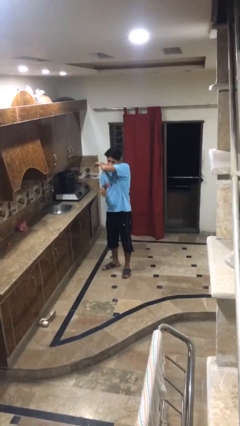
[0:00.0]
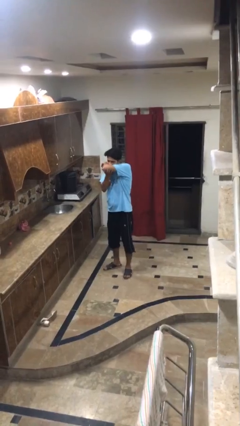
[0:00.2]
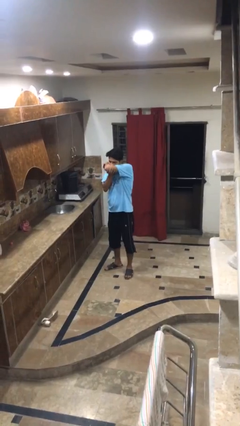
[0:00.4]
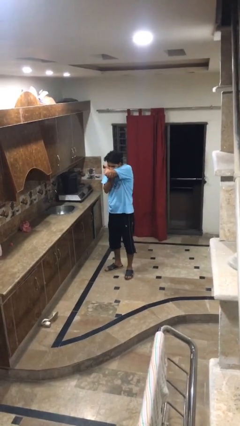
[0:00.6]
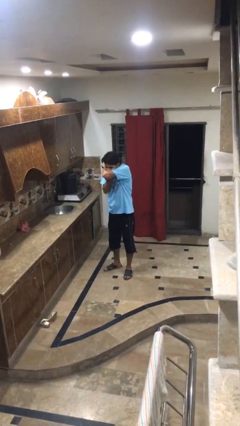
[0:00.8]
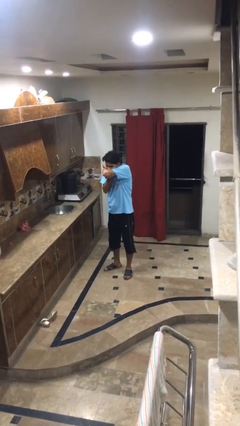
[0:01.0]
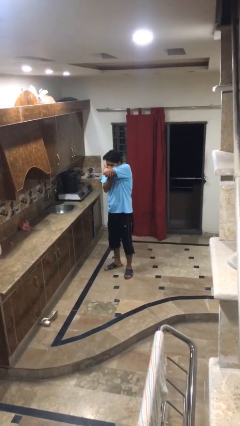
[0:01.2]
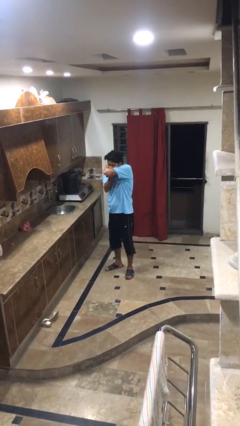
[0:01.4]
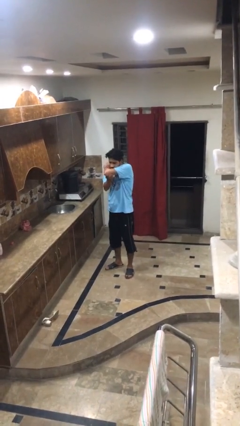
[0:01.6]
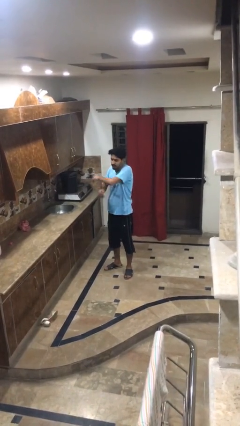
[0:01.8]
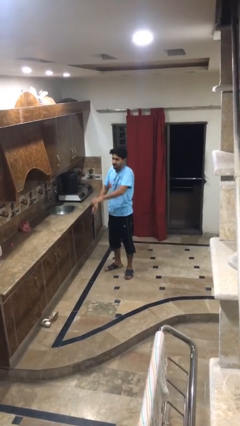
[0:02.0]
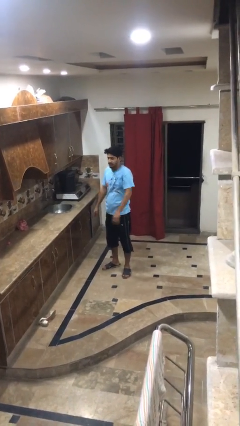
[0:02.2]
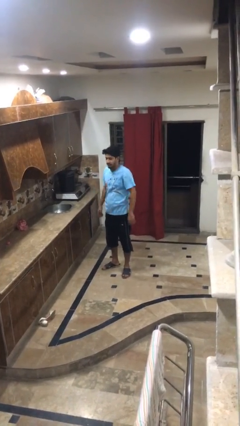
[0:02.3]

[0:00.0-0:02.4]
person sneezes into arm

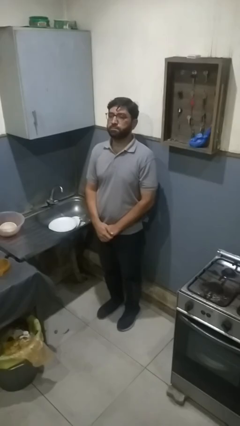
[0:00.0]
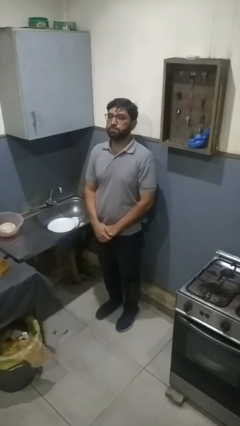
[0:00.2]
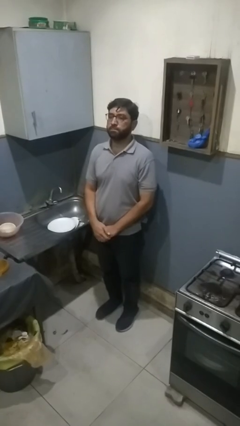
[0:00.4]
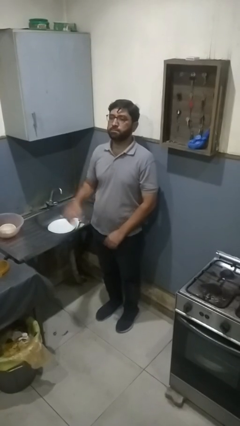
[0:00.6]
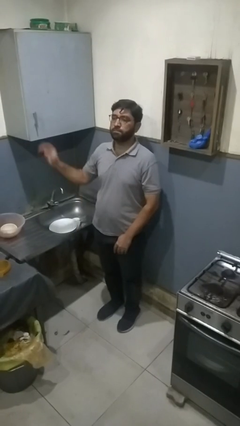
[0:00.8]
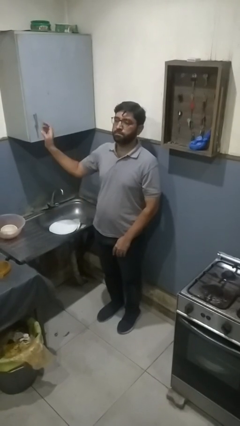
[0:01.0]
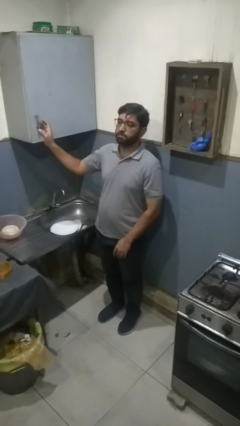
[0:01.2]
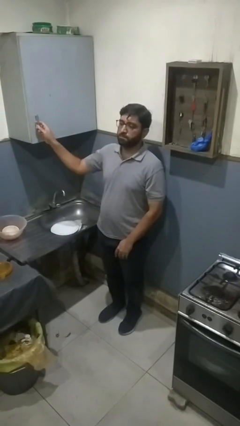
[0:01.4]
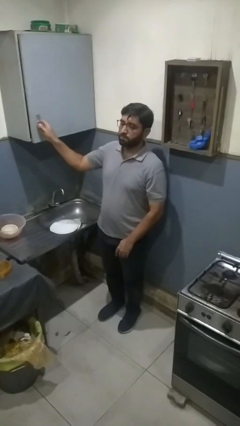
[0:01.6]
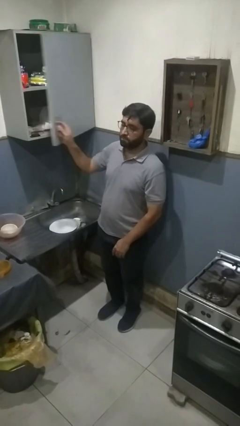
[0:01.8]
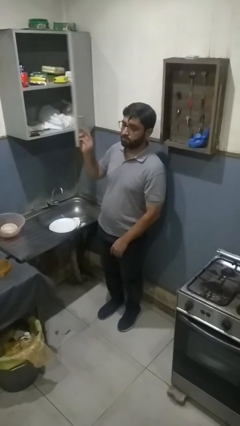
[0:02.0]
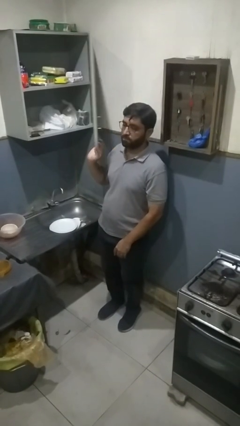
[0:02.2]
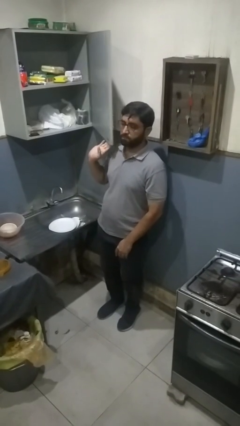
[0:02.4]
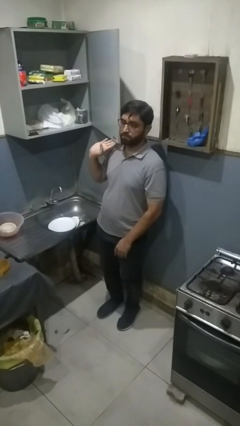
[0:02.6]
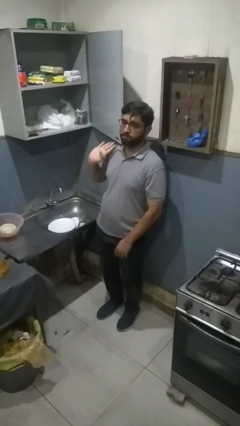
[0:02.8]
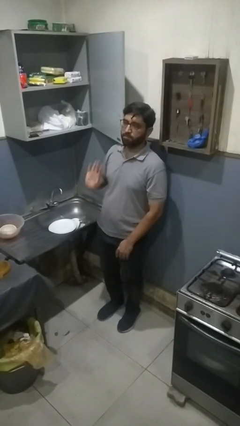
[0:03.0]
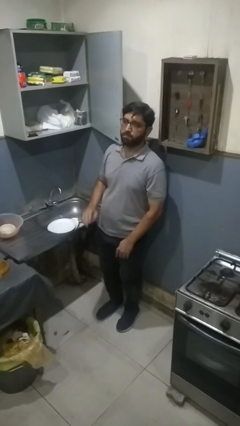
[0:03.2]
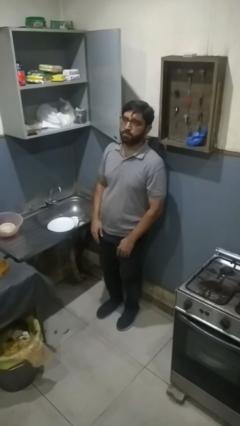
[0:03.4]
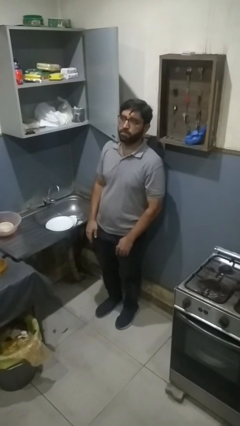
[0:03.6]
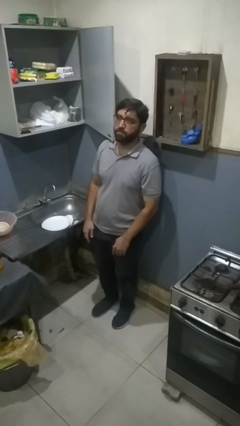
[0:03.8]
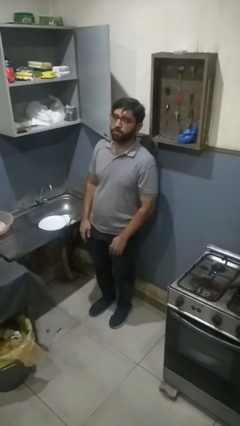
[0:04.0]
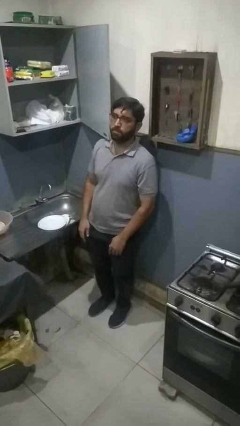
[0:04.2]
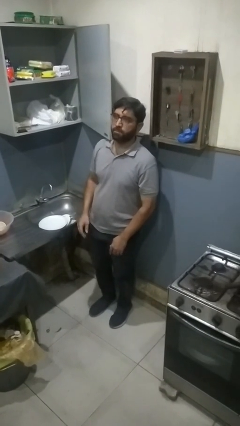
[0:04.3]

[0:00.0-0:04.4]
person opens cabinet

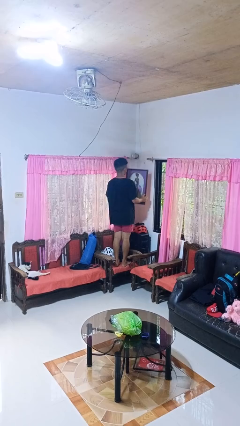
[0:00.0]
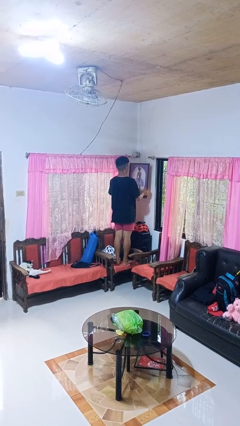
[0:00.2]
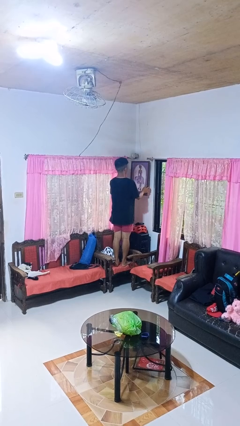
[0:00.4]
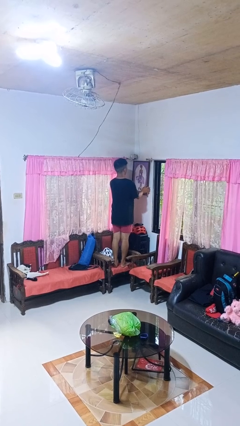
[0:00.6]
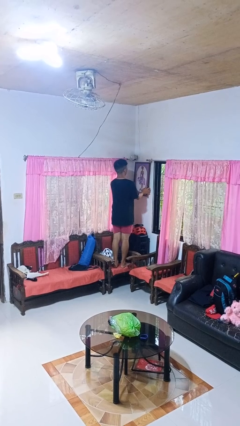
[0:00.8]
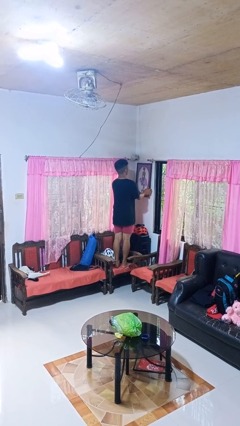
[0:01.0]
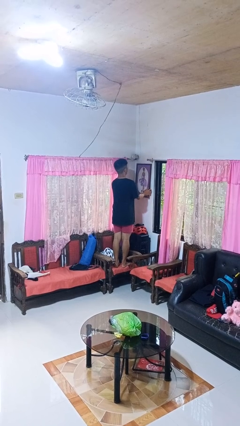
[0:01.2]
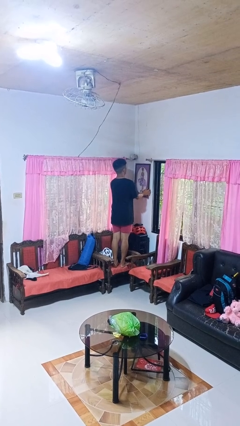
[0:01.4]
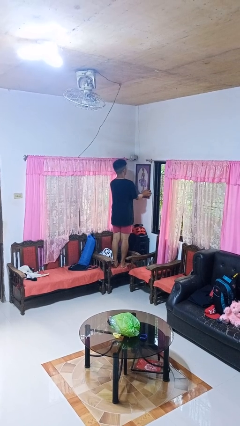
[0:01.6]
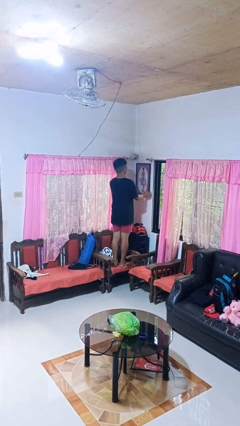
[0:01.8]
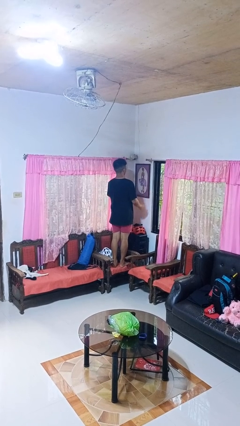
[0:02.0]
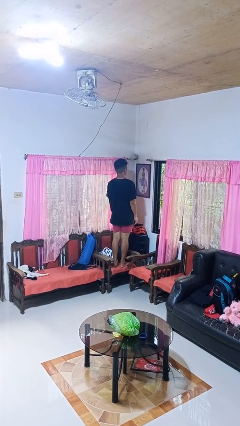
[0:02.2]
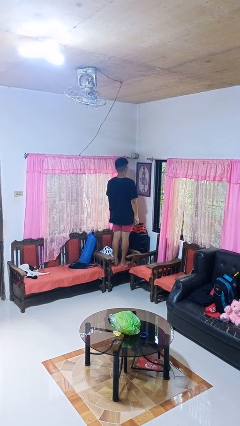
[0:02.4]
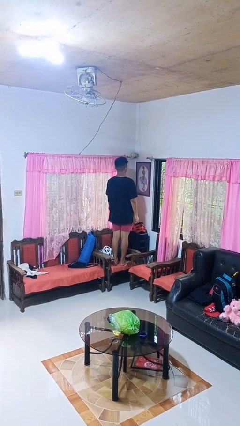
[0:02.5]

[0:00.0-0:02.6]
person puts up picture frame

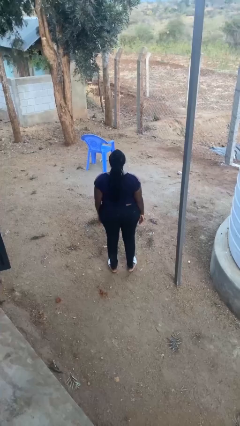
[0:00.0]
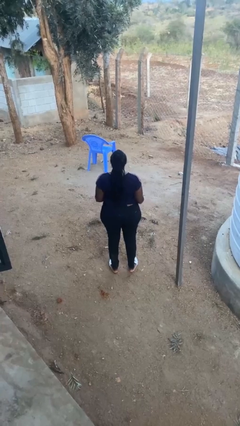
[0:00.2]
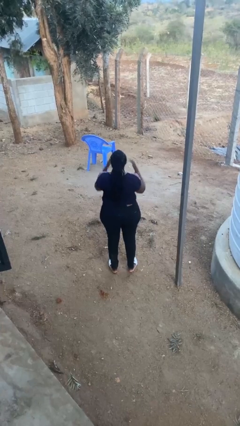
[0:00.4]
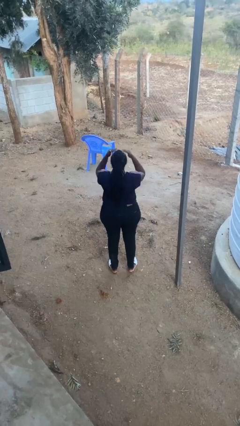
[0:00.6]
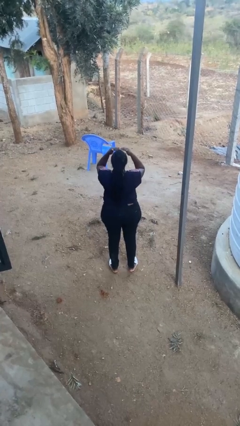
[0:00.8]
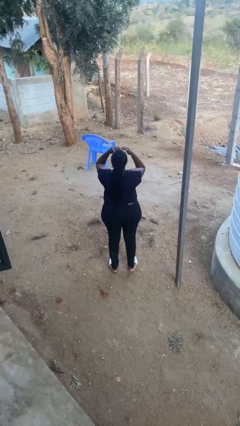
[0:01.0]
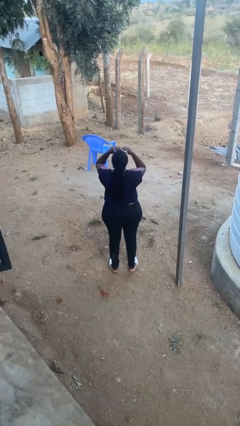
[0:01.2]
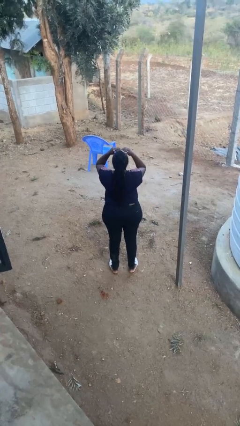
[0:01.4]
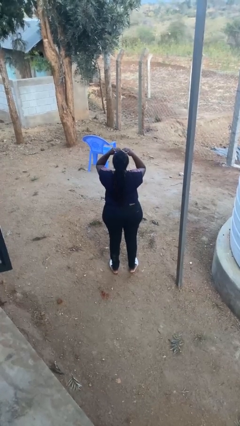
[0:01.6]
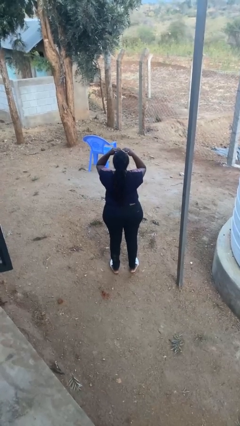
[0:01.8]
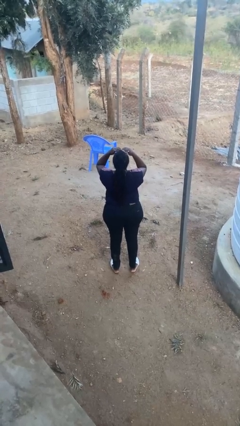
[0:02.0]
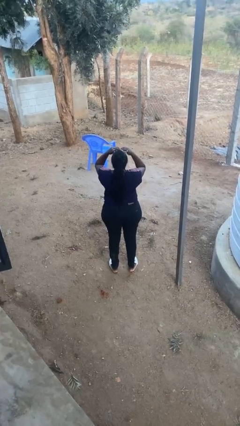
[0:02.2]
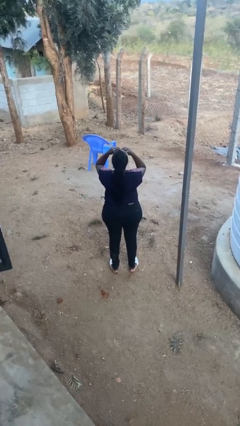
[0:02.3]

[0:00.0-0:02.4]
person shades eyes

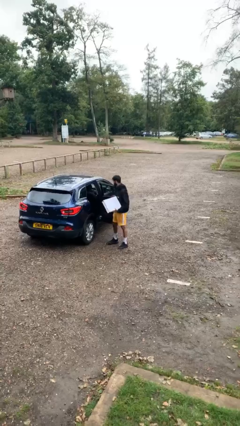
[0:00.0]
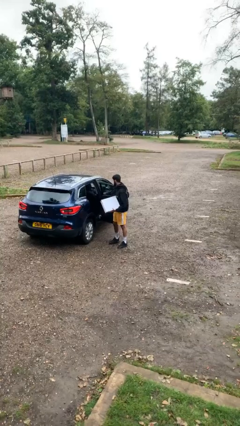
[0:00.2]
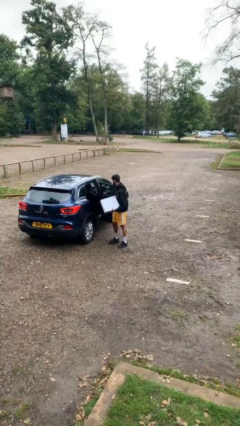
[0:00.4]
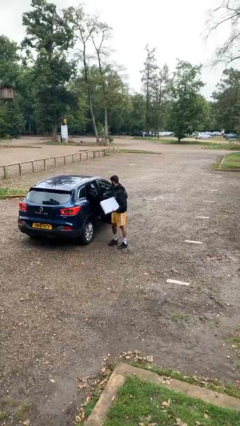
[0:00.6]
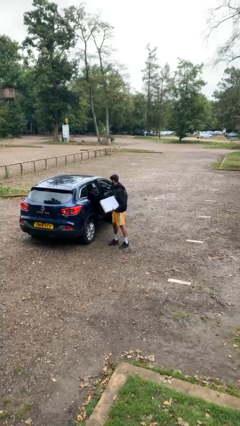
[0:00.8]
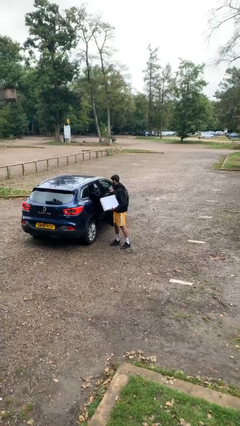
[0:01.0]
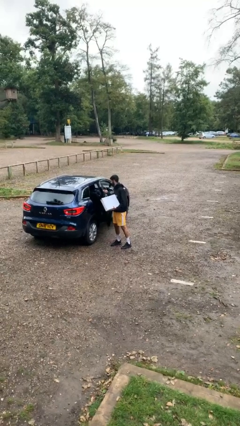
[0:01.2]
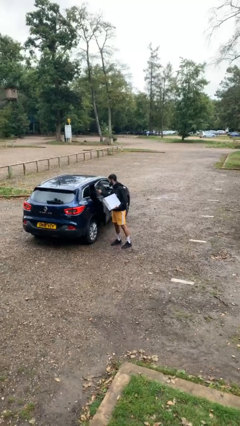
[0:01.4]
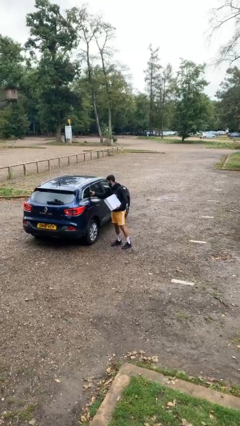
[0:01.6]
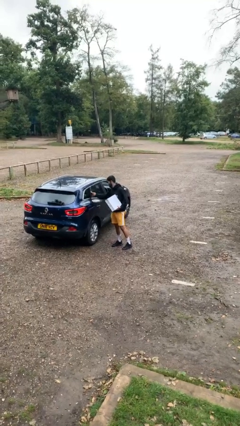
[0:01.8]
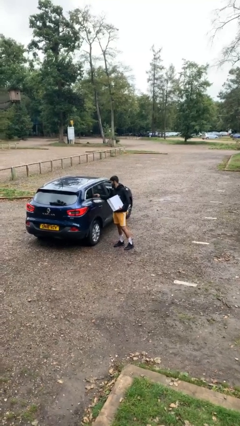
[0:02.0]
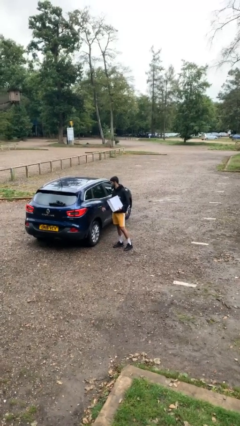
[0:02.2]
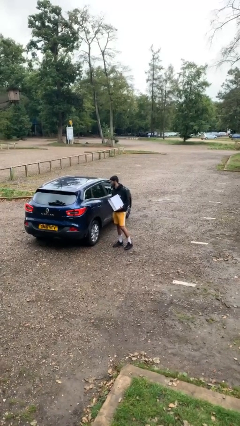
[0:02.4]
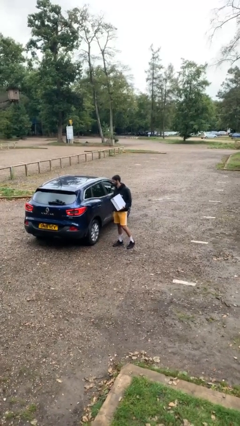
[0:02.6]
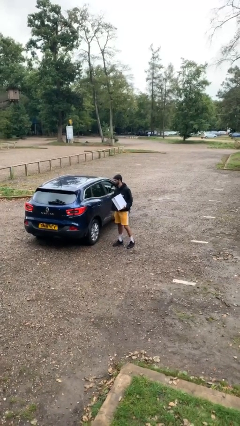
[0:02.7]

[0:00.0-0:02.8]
person closes car door

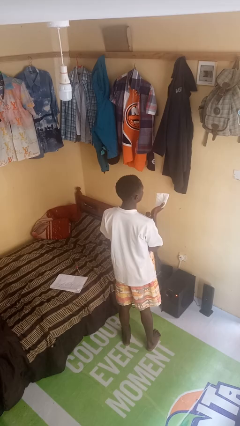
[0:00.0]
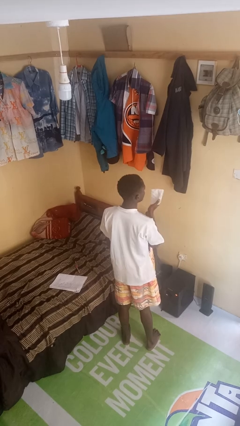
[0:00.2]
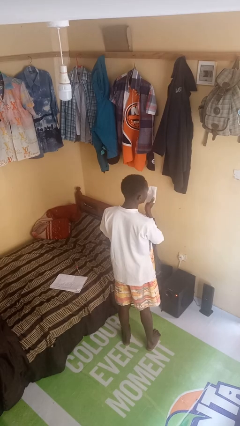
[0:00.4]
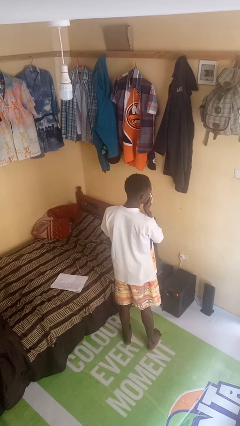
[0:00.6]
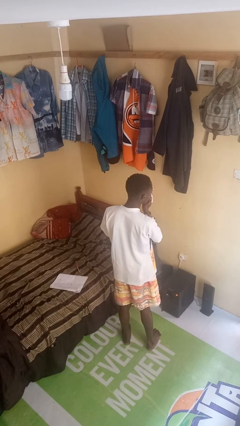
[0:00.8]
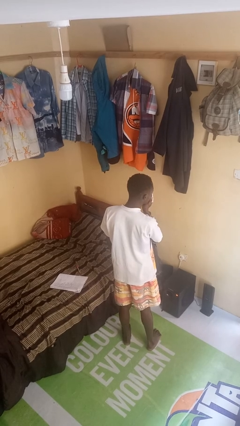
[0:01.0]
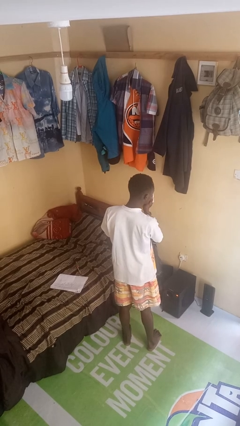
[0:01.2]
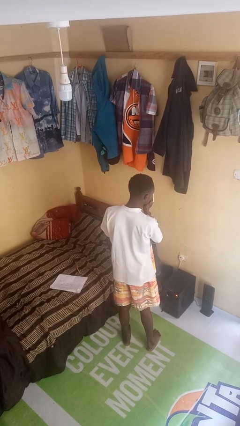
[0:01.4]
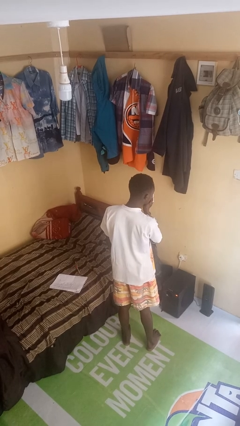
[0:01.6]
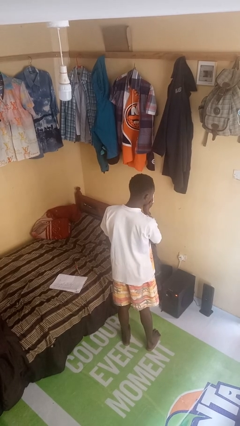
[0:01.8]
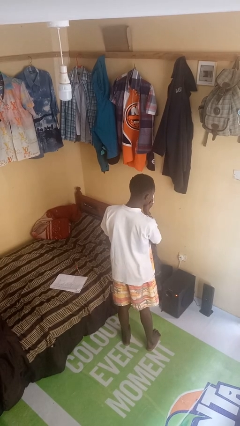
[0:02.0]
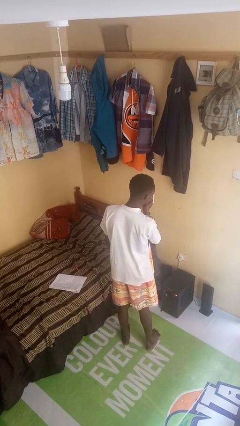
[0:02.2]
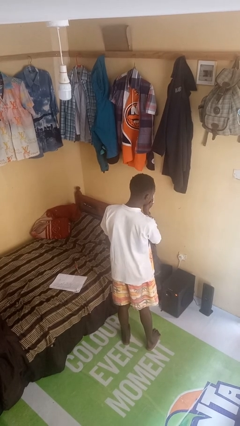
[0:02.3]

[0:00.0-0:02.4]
person blows nose

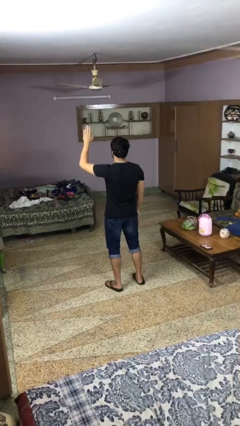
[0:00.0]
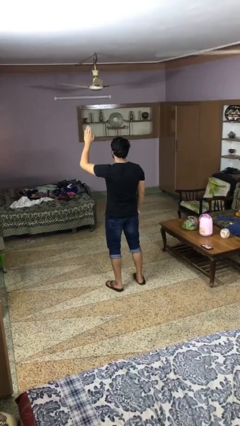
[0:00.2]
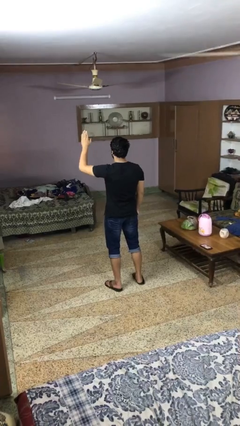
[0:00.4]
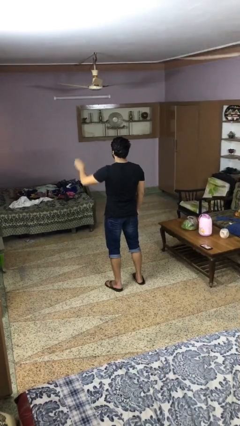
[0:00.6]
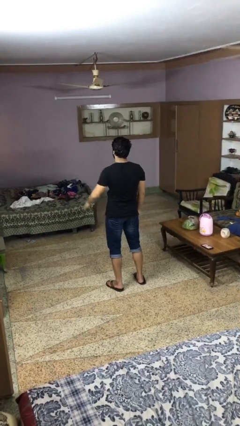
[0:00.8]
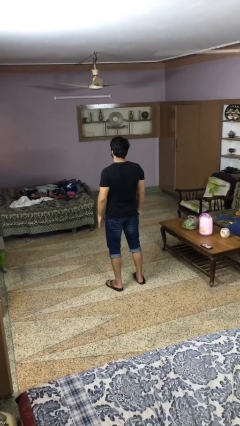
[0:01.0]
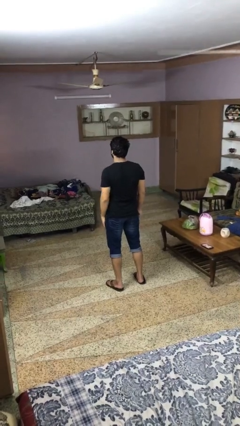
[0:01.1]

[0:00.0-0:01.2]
person gestures lower hand
